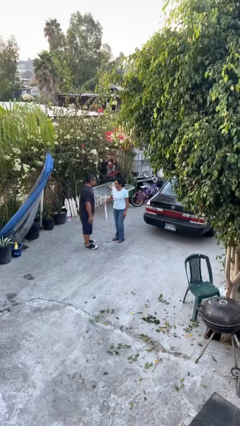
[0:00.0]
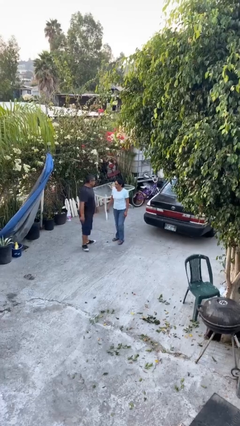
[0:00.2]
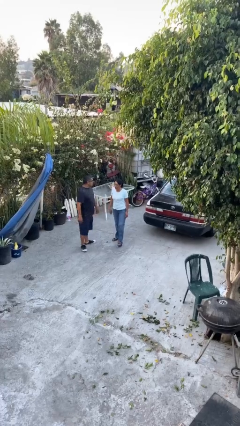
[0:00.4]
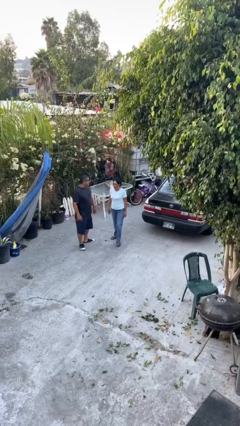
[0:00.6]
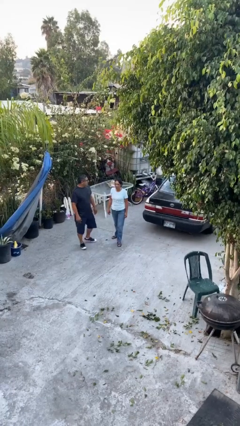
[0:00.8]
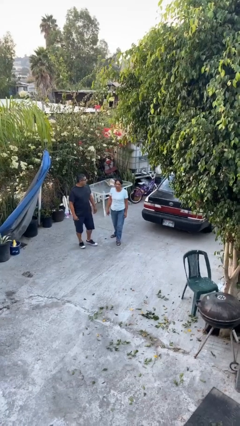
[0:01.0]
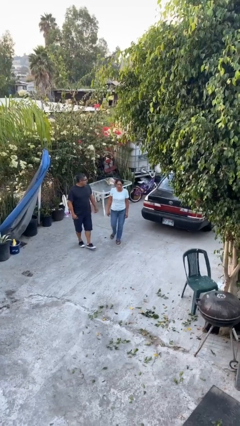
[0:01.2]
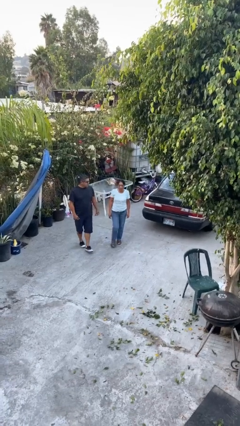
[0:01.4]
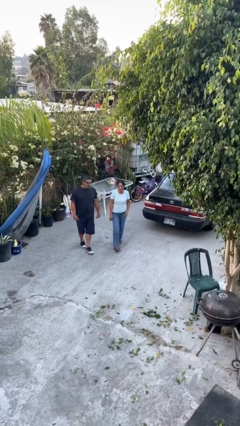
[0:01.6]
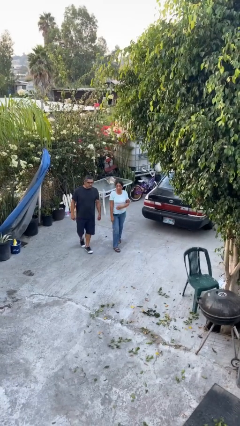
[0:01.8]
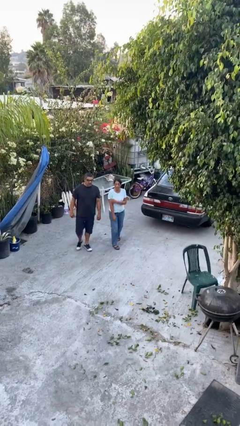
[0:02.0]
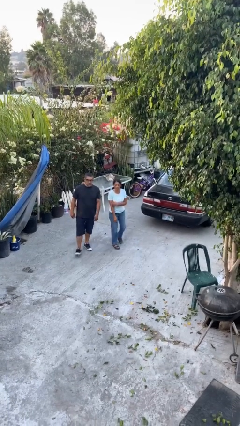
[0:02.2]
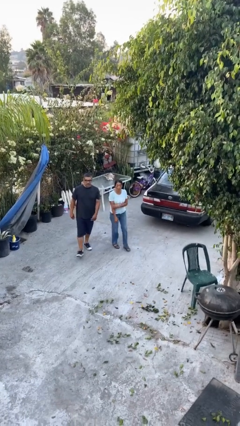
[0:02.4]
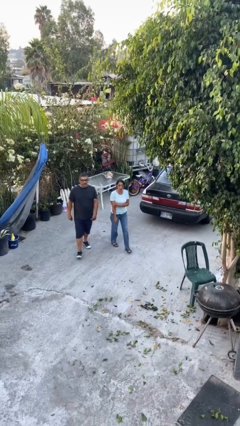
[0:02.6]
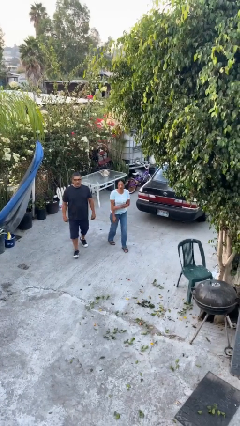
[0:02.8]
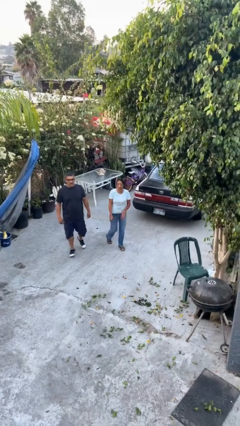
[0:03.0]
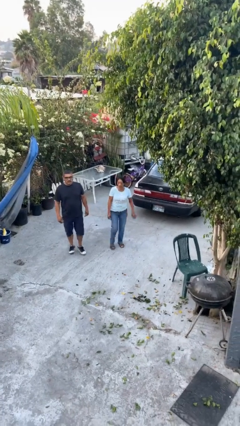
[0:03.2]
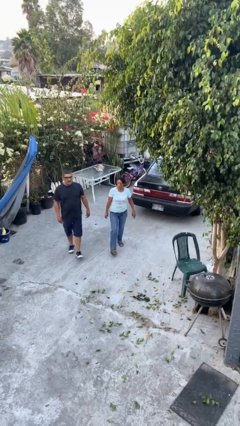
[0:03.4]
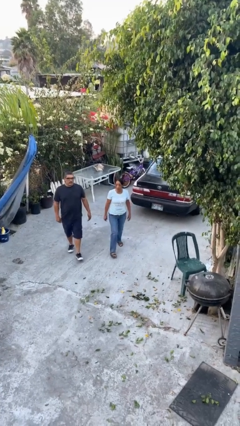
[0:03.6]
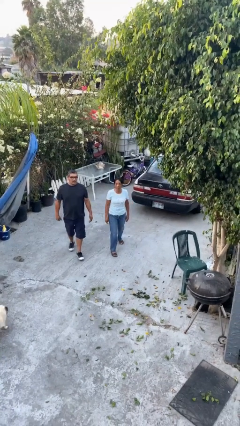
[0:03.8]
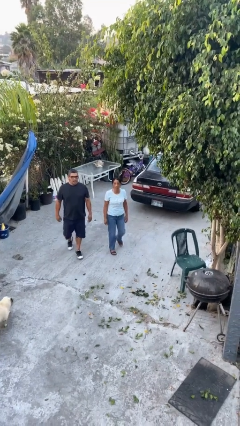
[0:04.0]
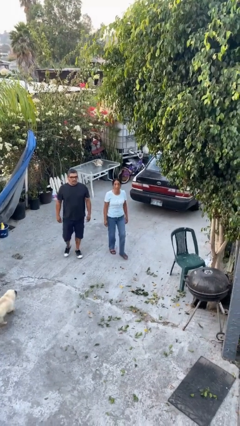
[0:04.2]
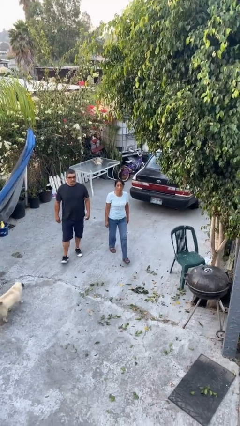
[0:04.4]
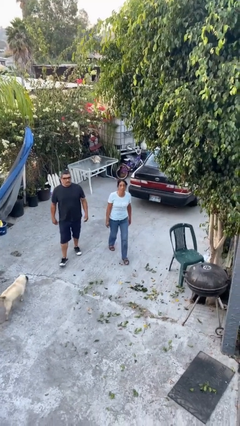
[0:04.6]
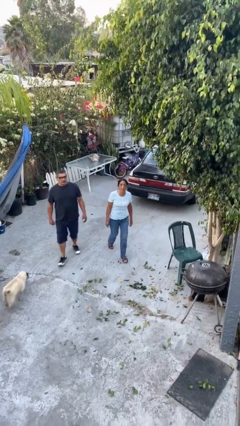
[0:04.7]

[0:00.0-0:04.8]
person talks to person

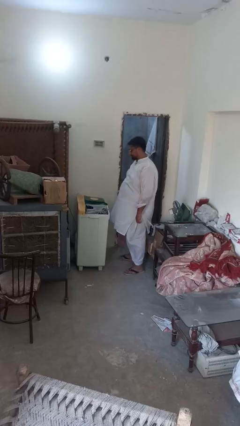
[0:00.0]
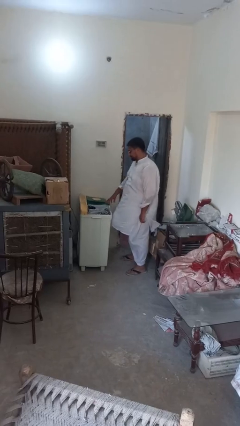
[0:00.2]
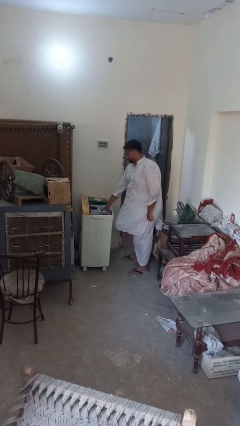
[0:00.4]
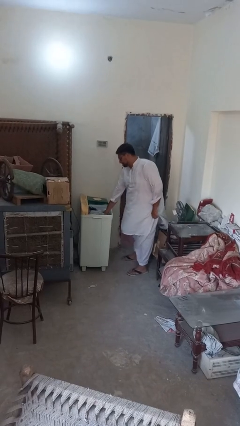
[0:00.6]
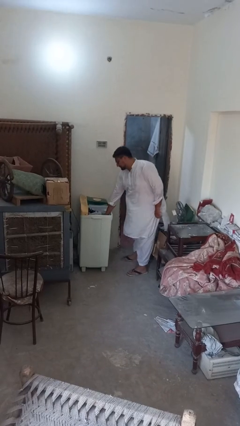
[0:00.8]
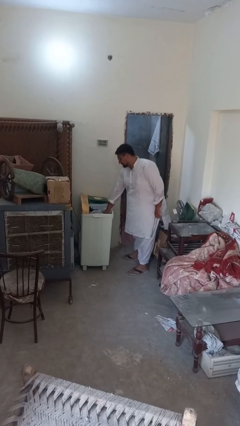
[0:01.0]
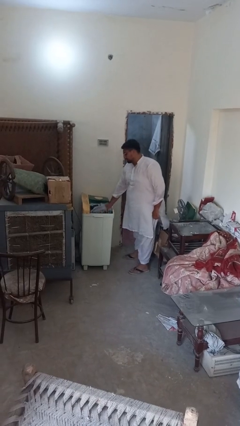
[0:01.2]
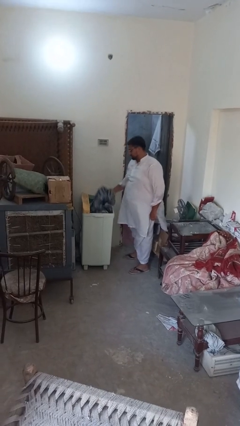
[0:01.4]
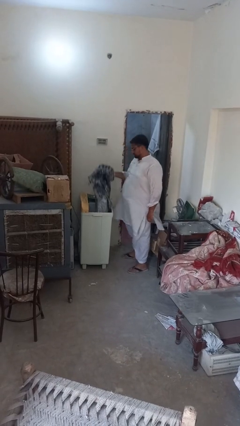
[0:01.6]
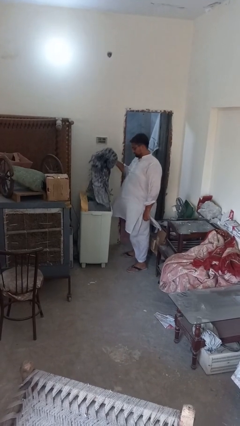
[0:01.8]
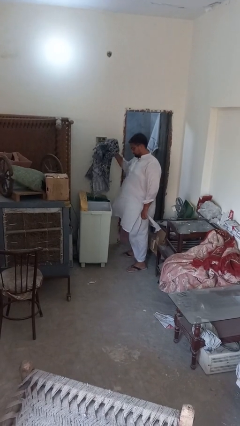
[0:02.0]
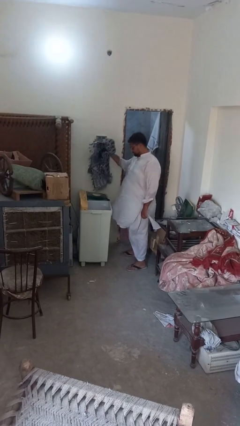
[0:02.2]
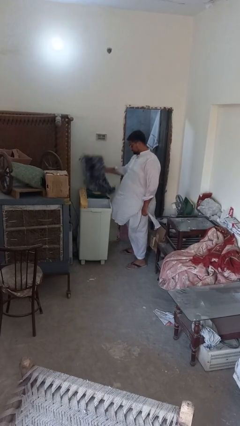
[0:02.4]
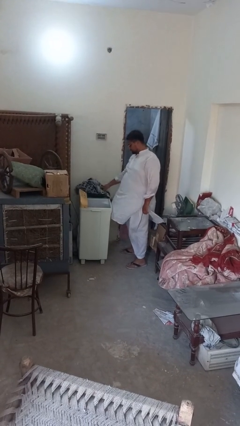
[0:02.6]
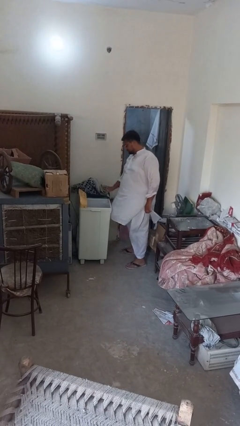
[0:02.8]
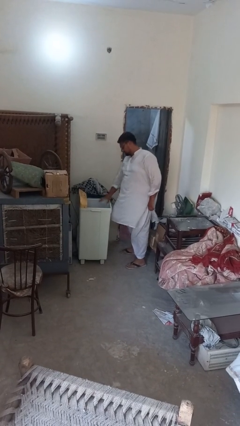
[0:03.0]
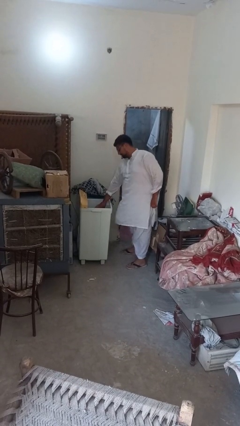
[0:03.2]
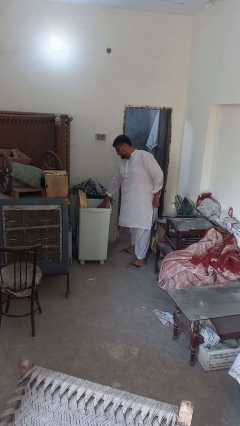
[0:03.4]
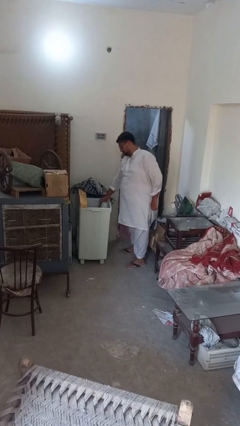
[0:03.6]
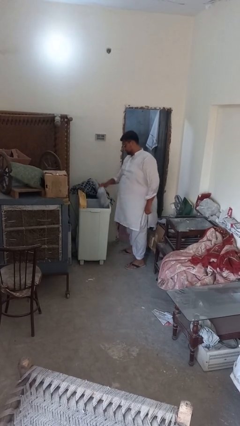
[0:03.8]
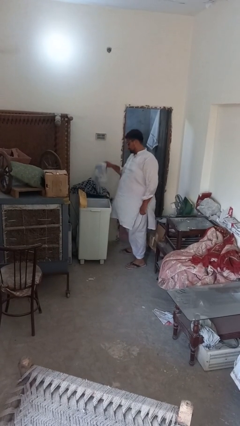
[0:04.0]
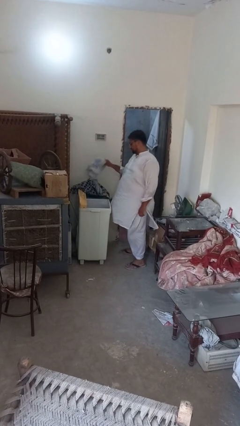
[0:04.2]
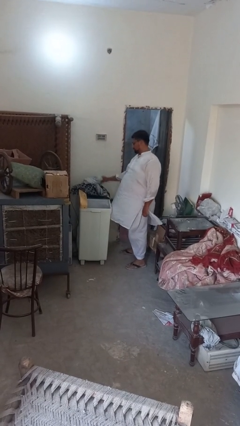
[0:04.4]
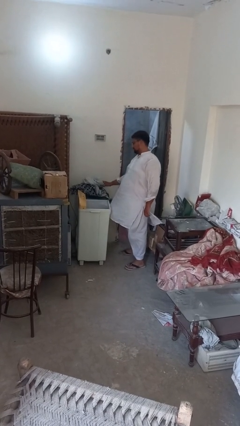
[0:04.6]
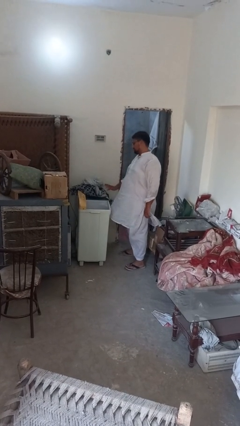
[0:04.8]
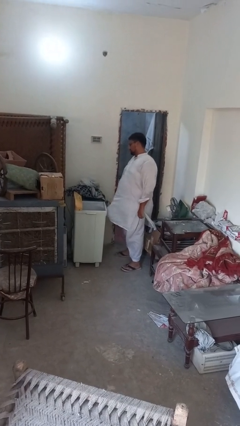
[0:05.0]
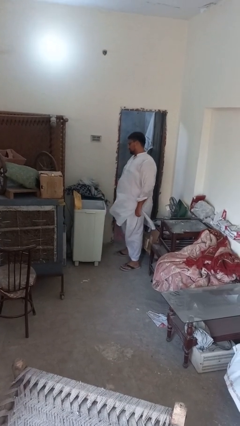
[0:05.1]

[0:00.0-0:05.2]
person unloads clotheswasher

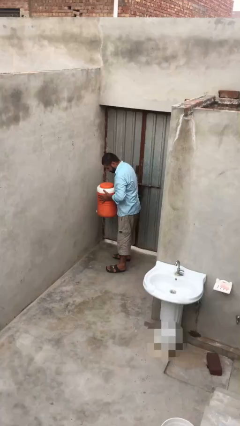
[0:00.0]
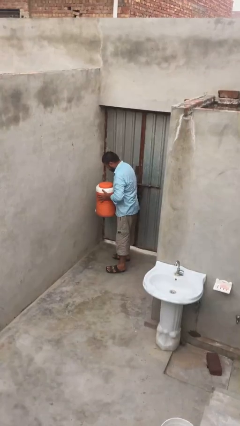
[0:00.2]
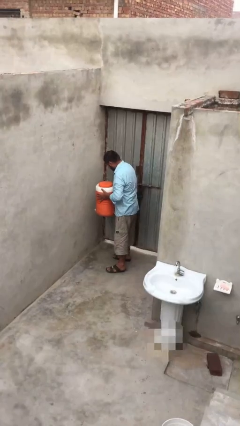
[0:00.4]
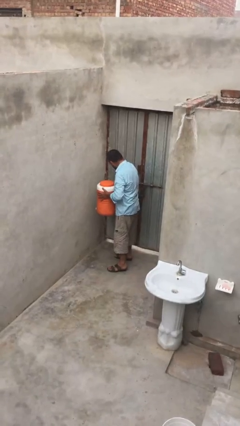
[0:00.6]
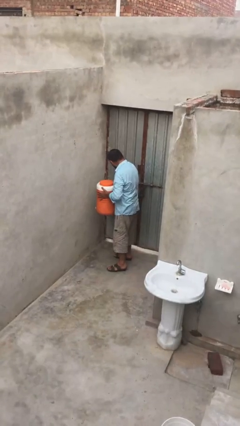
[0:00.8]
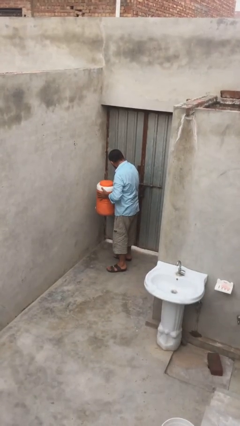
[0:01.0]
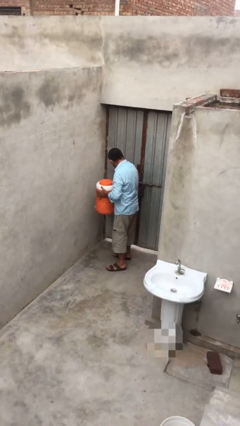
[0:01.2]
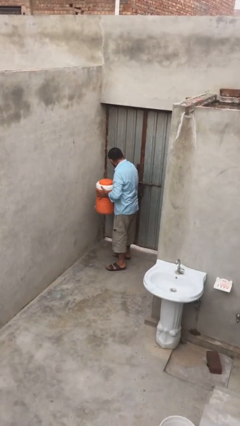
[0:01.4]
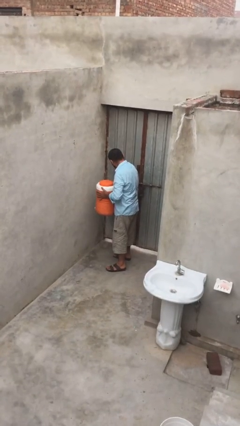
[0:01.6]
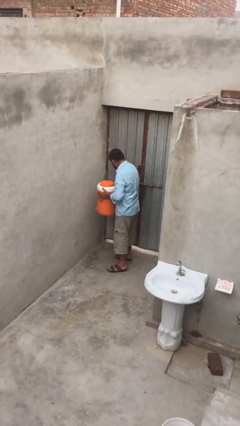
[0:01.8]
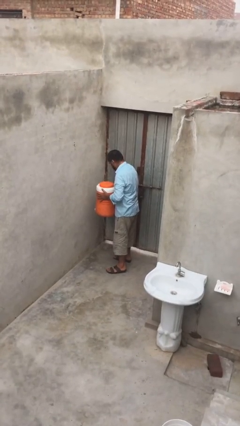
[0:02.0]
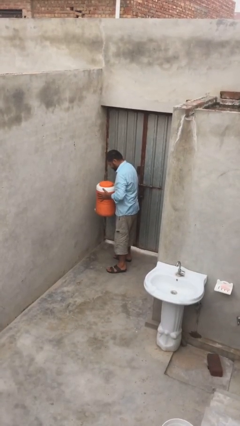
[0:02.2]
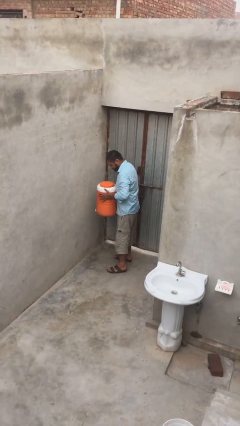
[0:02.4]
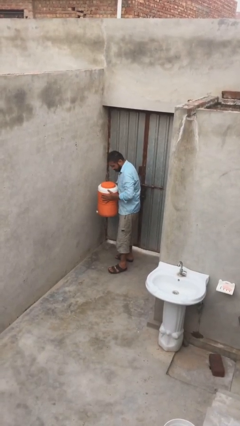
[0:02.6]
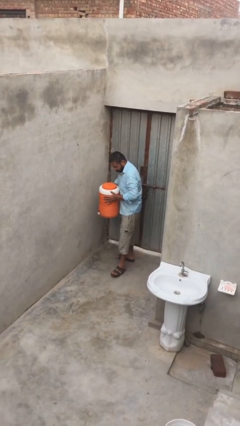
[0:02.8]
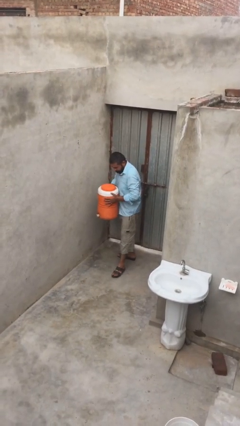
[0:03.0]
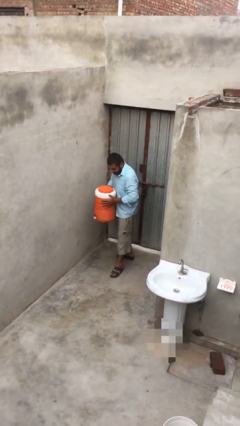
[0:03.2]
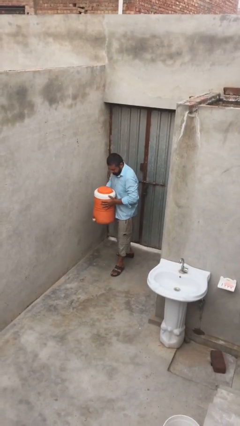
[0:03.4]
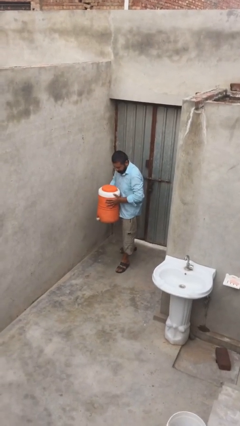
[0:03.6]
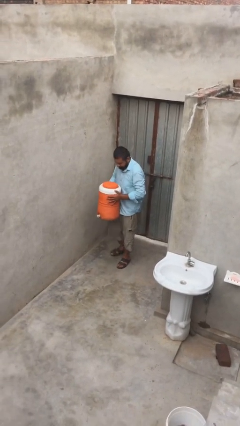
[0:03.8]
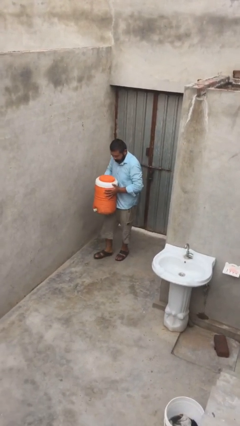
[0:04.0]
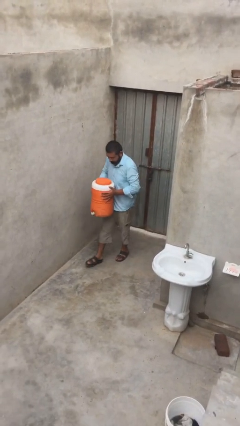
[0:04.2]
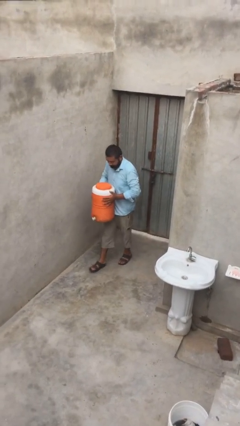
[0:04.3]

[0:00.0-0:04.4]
person carries heavy object

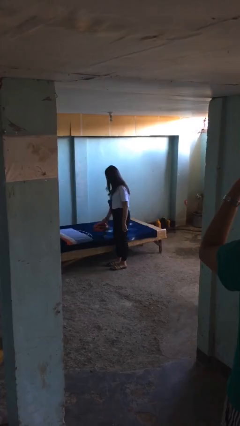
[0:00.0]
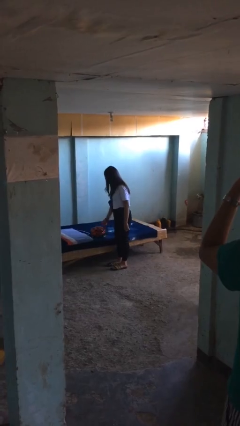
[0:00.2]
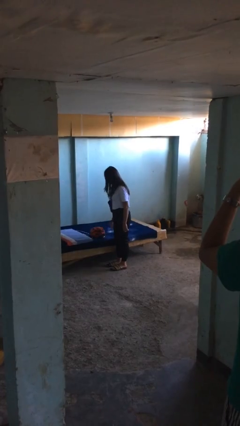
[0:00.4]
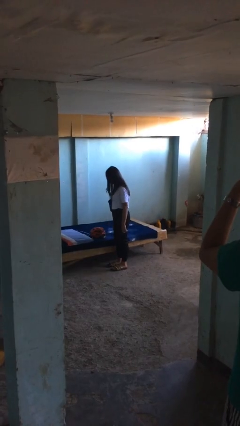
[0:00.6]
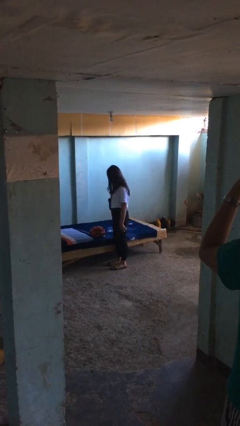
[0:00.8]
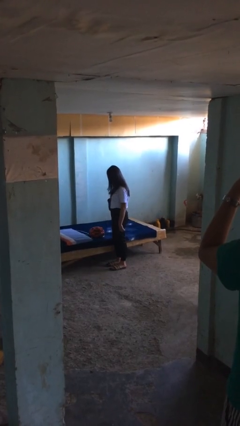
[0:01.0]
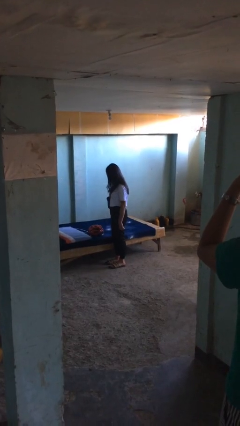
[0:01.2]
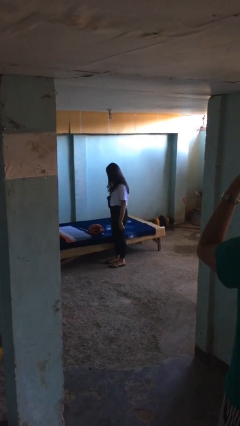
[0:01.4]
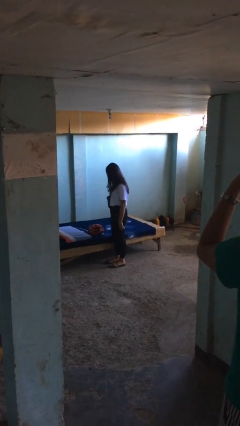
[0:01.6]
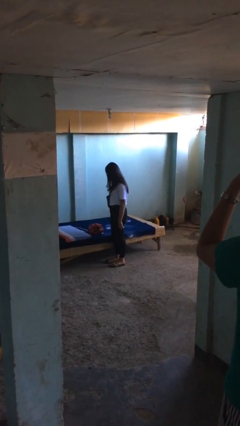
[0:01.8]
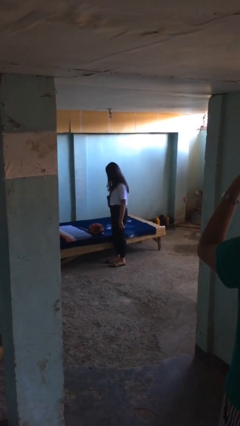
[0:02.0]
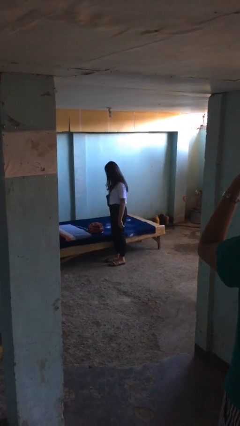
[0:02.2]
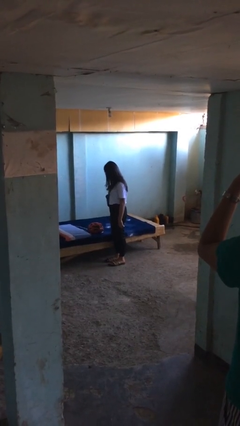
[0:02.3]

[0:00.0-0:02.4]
person puts down object on bed

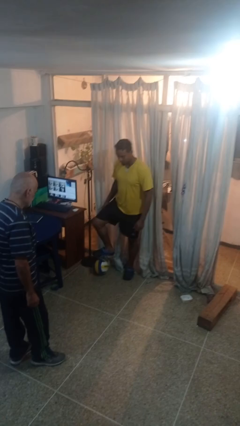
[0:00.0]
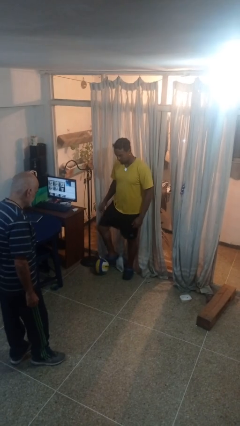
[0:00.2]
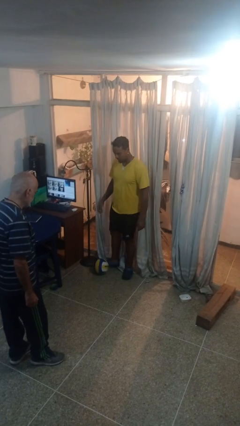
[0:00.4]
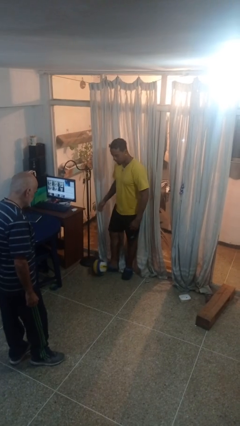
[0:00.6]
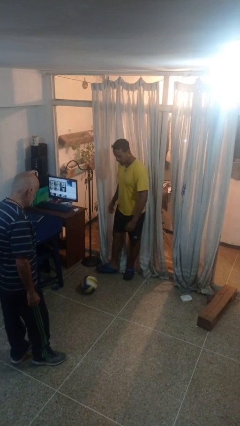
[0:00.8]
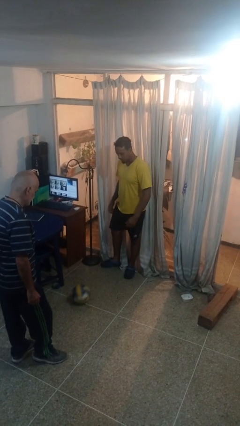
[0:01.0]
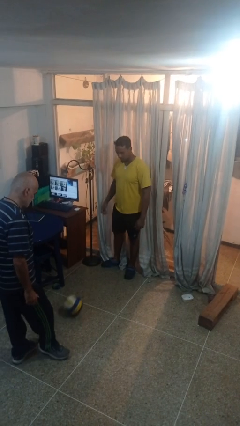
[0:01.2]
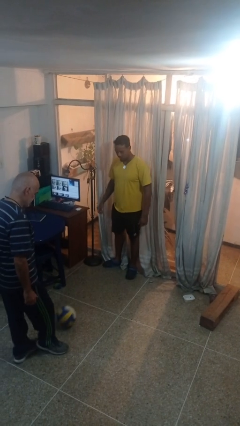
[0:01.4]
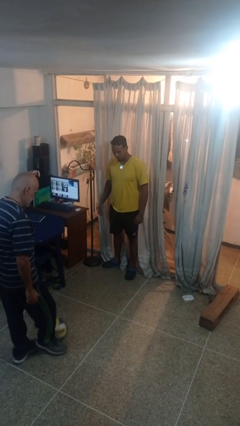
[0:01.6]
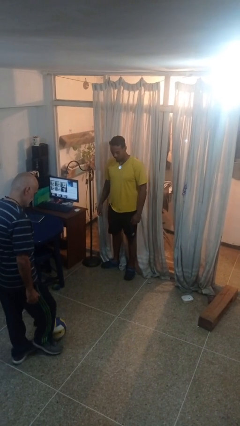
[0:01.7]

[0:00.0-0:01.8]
person kicks object to person
